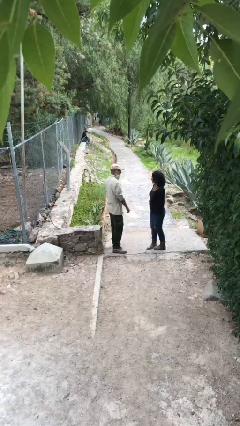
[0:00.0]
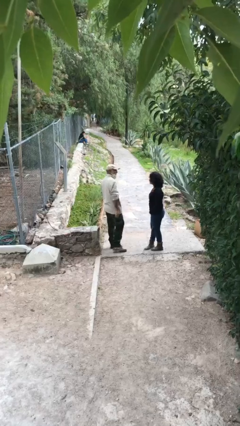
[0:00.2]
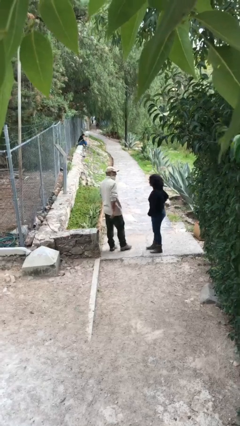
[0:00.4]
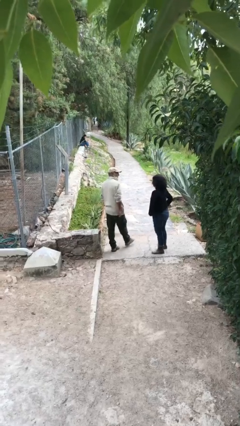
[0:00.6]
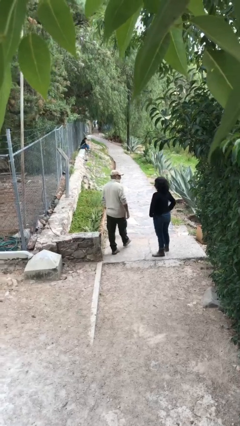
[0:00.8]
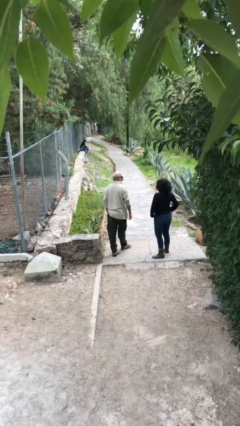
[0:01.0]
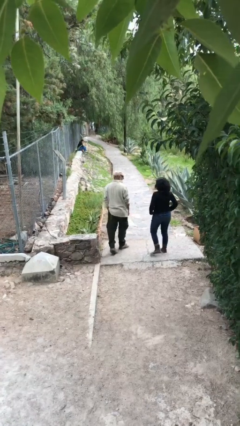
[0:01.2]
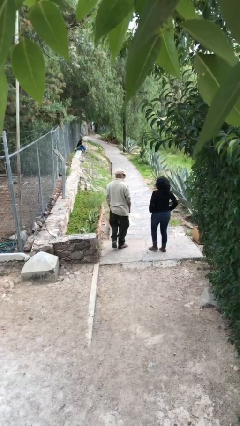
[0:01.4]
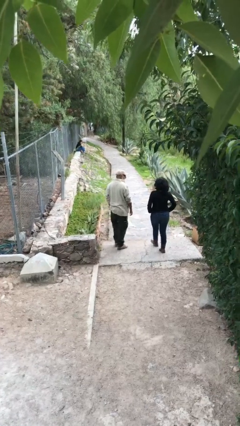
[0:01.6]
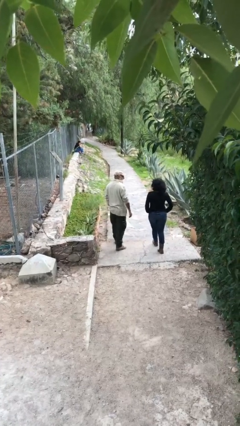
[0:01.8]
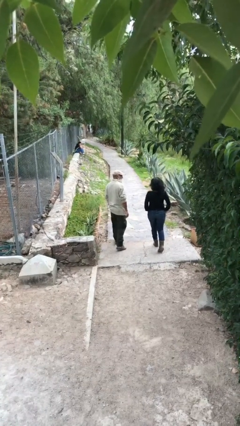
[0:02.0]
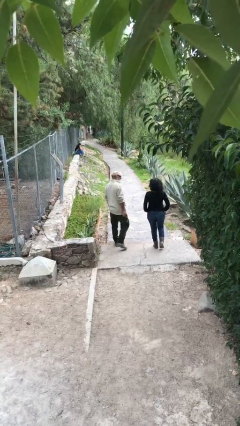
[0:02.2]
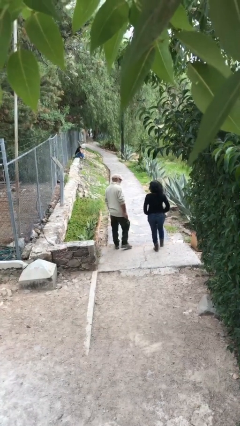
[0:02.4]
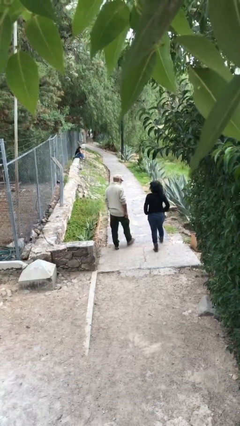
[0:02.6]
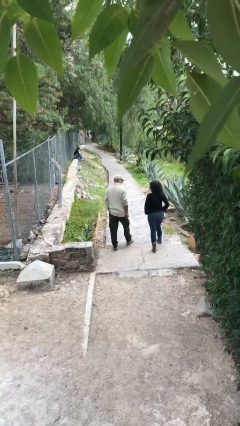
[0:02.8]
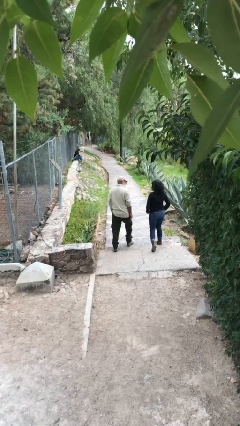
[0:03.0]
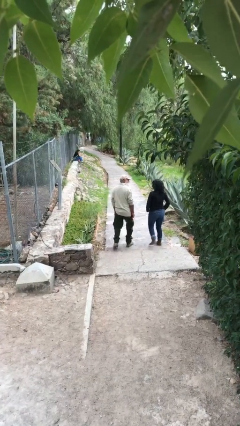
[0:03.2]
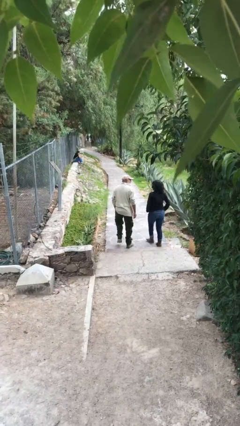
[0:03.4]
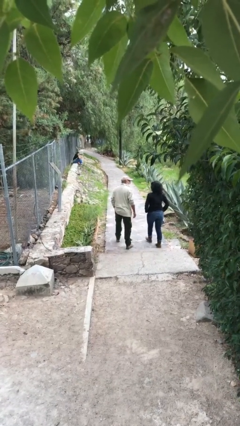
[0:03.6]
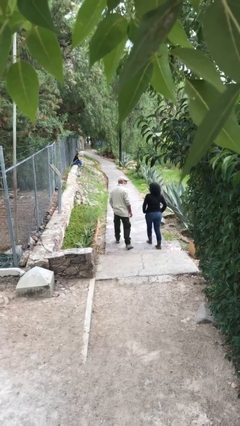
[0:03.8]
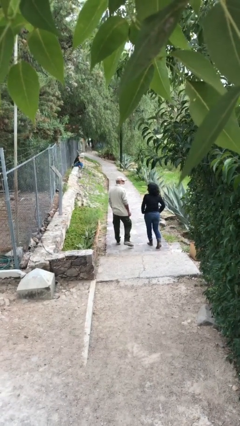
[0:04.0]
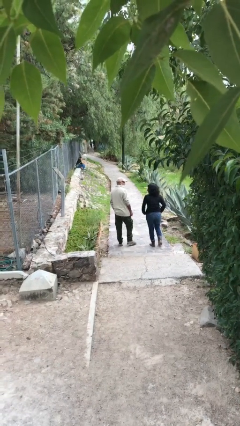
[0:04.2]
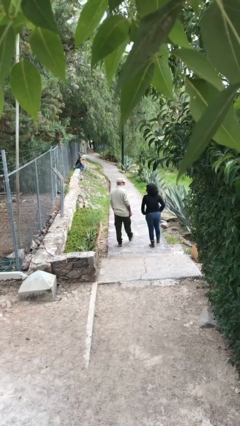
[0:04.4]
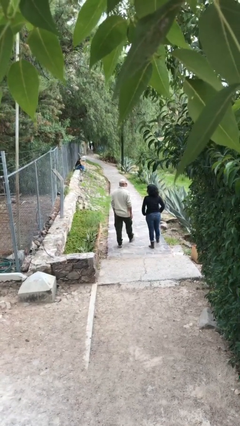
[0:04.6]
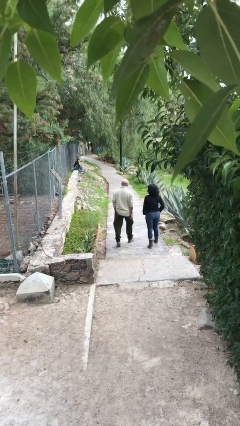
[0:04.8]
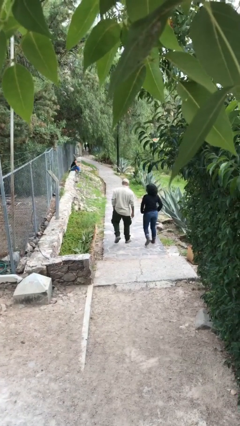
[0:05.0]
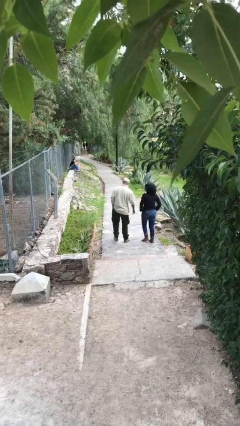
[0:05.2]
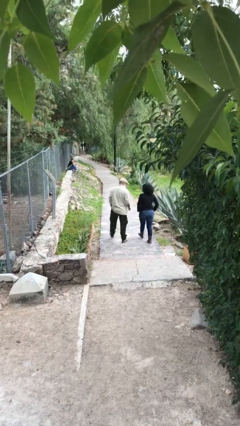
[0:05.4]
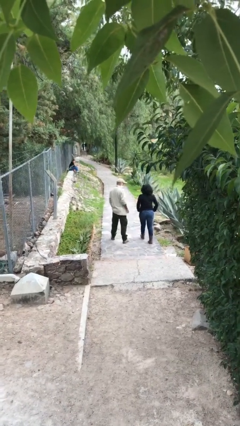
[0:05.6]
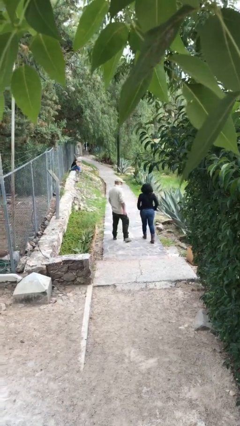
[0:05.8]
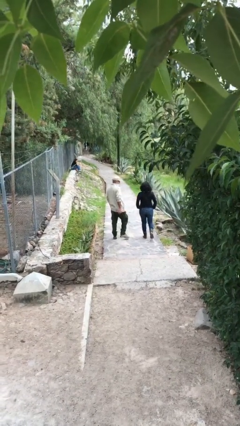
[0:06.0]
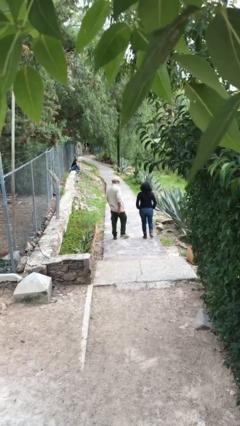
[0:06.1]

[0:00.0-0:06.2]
person talks to person

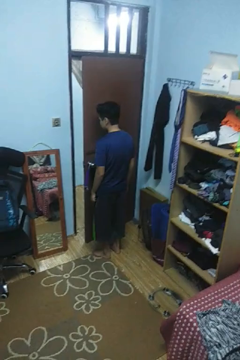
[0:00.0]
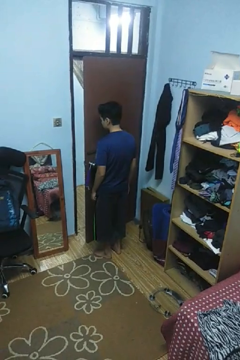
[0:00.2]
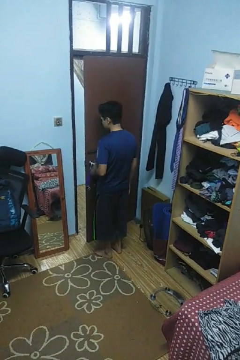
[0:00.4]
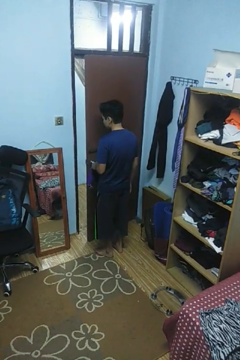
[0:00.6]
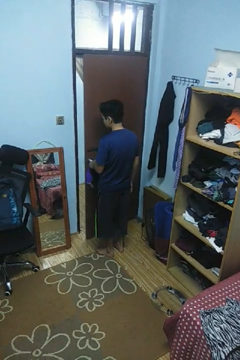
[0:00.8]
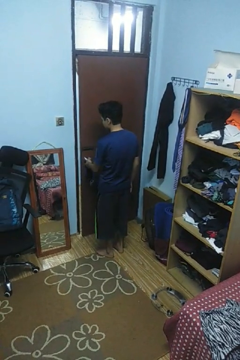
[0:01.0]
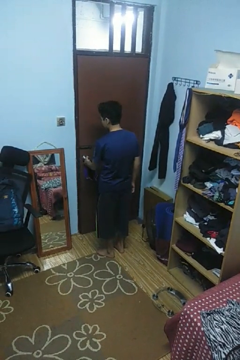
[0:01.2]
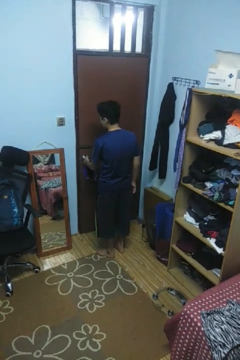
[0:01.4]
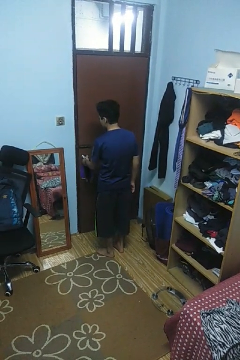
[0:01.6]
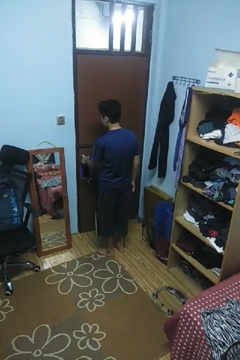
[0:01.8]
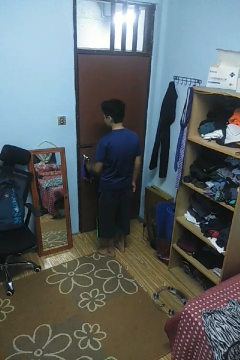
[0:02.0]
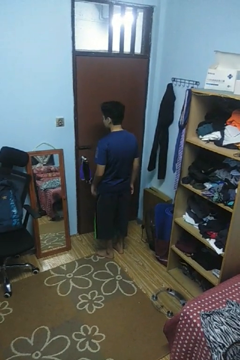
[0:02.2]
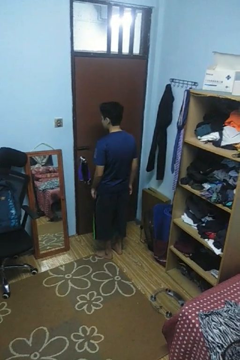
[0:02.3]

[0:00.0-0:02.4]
person closes facility door

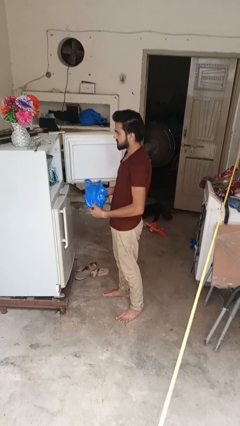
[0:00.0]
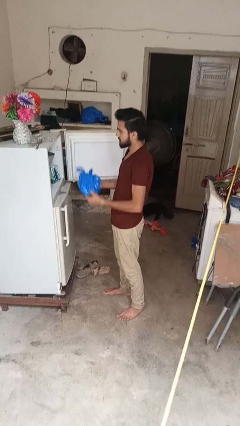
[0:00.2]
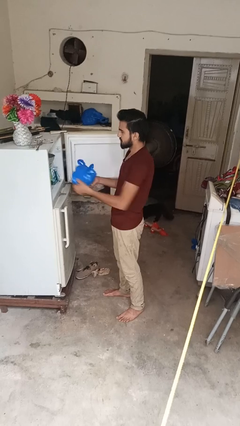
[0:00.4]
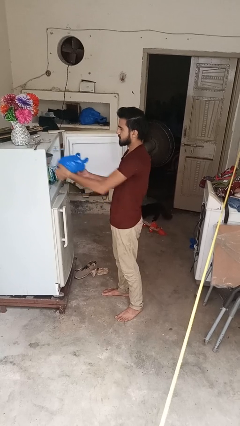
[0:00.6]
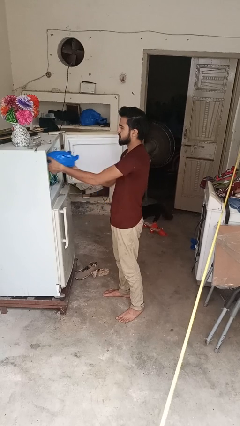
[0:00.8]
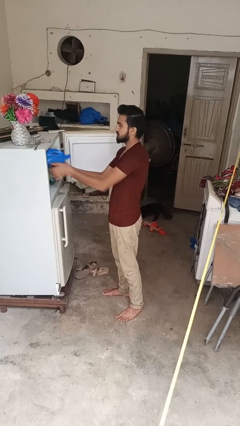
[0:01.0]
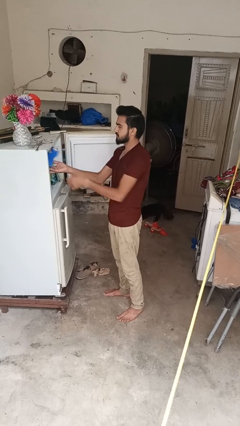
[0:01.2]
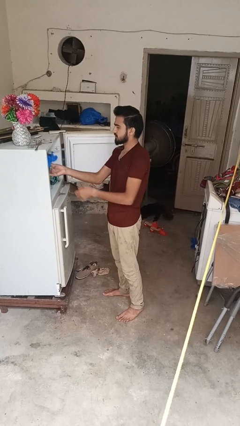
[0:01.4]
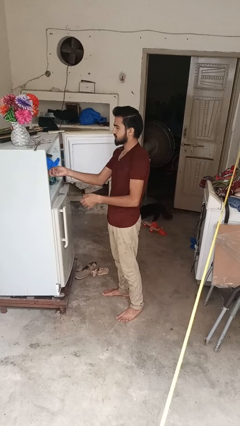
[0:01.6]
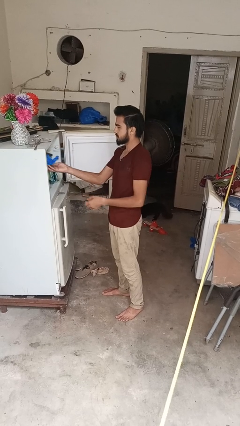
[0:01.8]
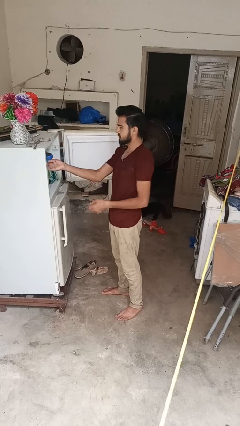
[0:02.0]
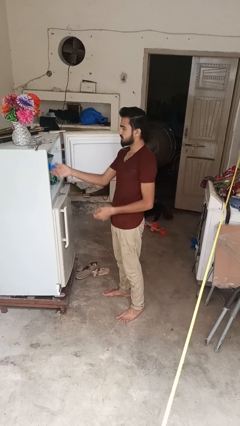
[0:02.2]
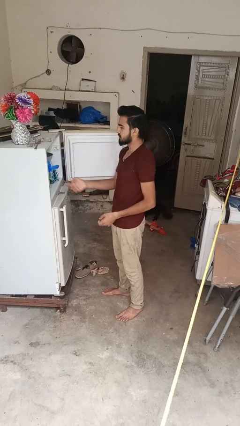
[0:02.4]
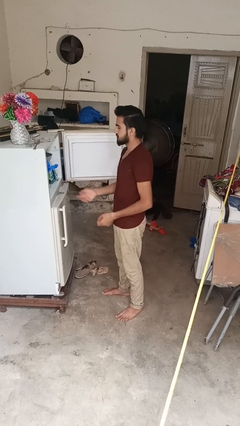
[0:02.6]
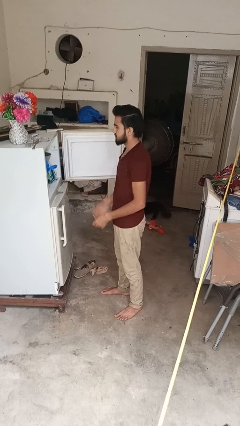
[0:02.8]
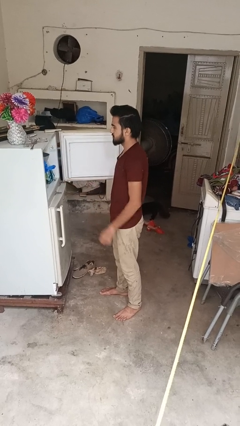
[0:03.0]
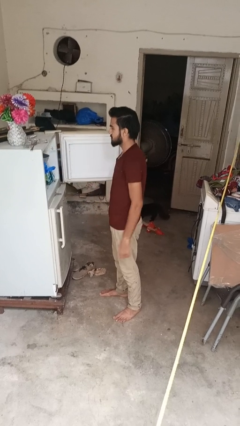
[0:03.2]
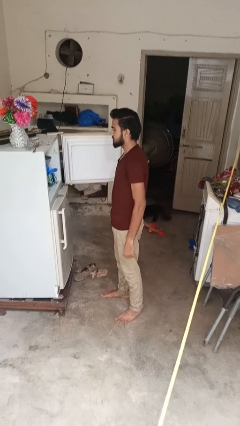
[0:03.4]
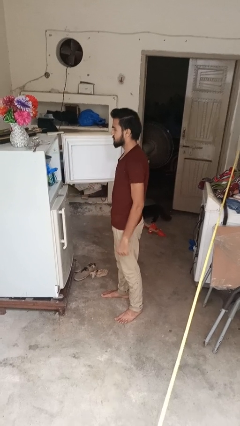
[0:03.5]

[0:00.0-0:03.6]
person loads groceries into refrigerator

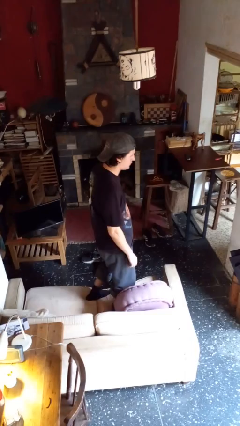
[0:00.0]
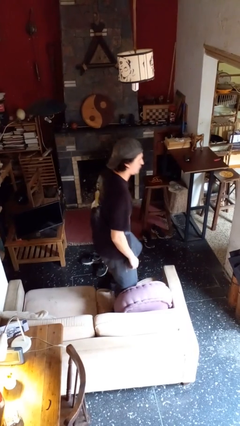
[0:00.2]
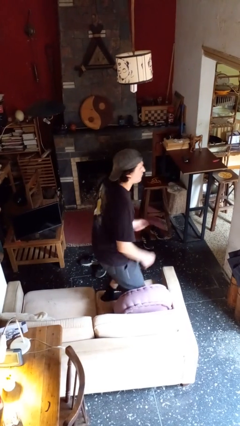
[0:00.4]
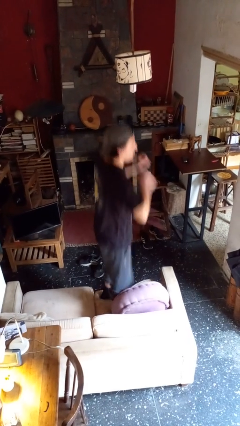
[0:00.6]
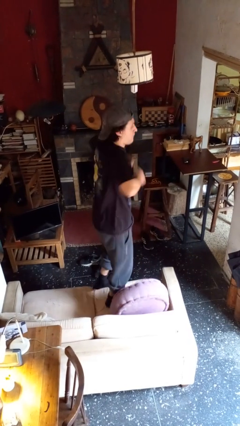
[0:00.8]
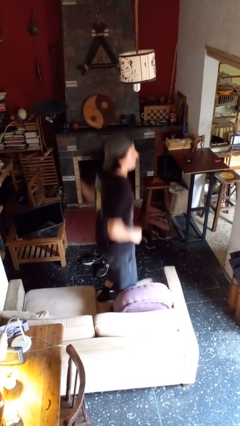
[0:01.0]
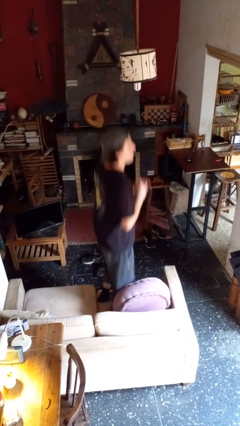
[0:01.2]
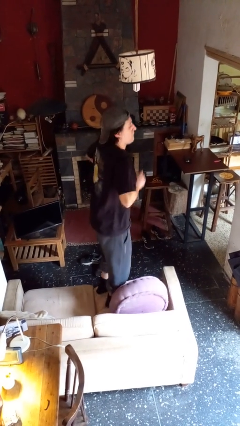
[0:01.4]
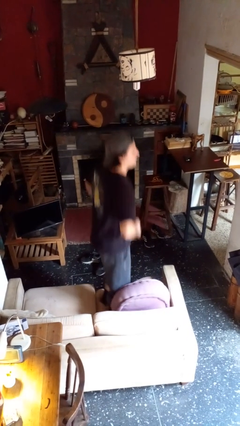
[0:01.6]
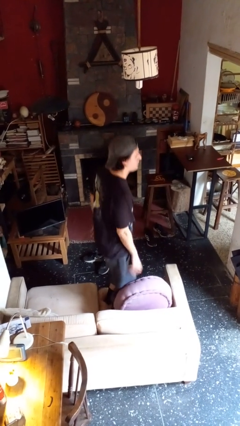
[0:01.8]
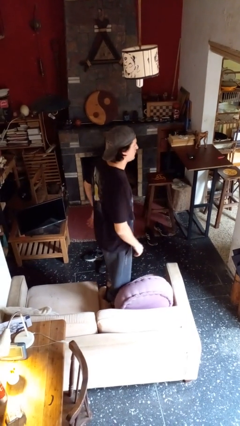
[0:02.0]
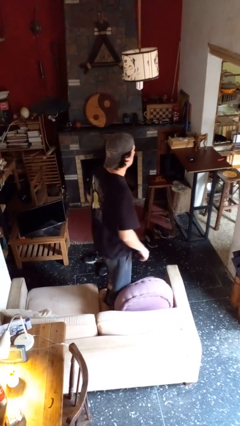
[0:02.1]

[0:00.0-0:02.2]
person jumps on couch

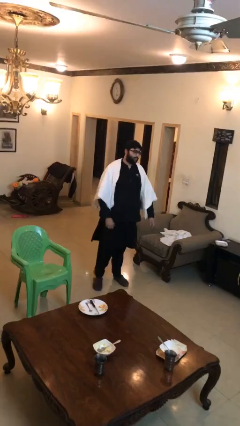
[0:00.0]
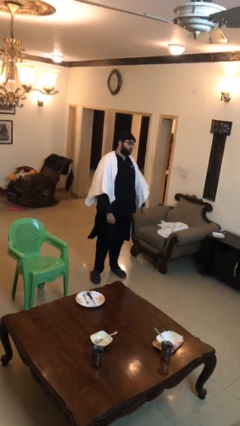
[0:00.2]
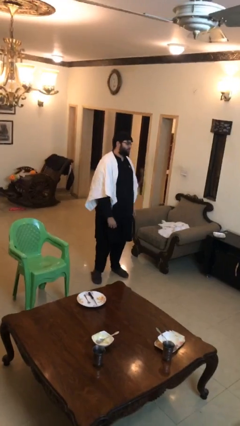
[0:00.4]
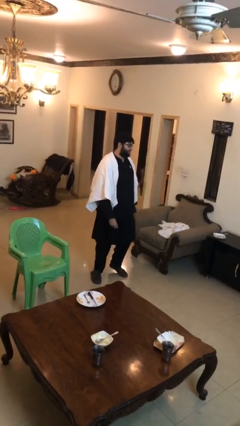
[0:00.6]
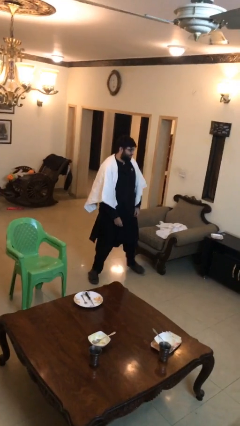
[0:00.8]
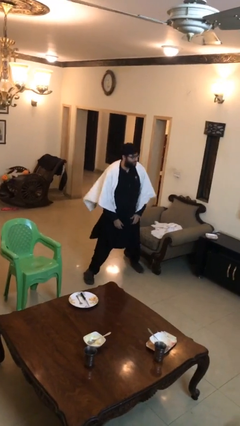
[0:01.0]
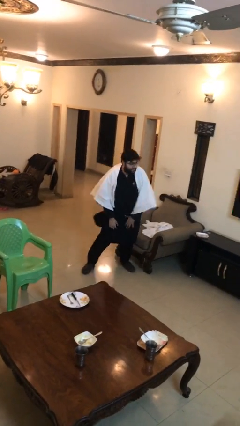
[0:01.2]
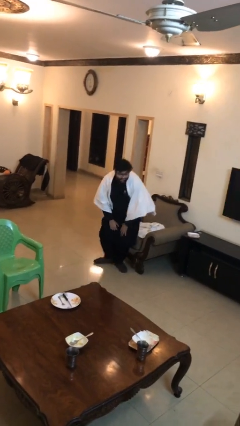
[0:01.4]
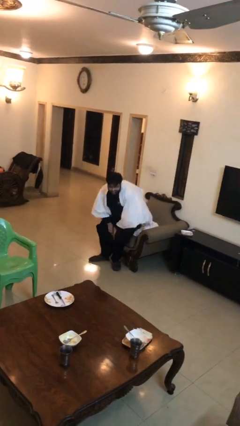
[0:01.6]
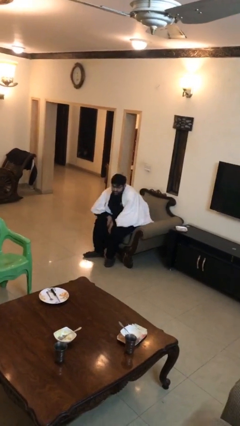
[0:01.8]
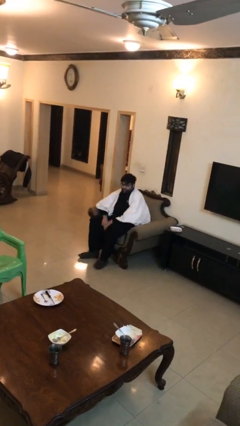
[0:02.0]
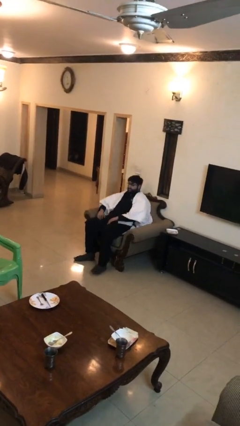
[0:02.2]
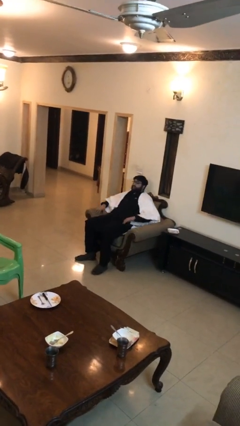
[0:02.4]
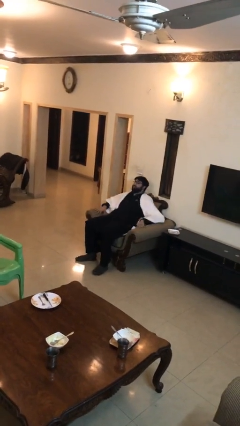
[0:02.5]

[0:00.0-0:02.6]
person sits down

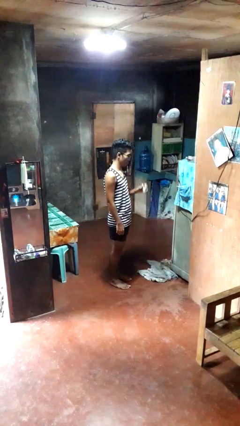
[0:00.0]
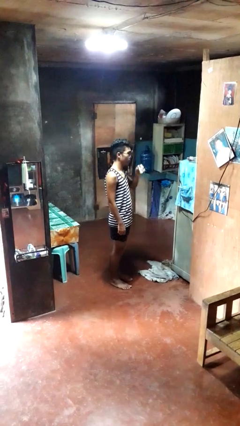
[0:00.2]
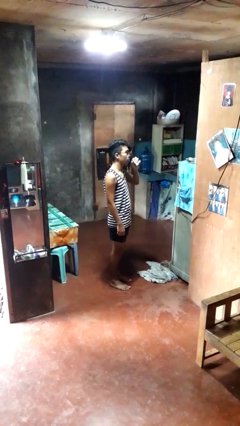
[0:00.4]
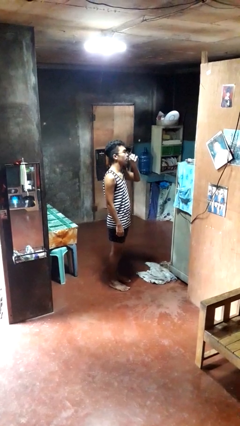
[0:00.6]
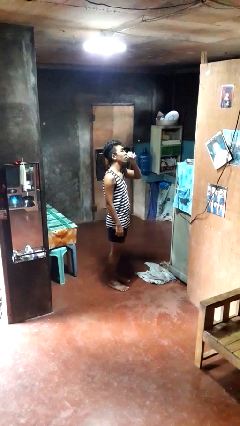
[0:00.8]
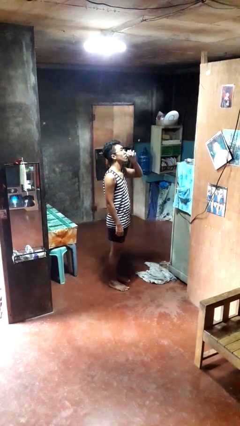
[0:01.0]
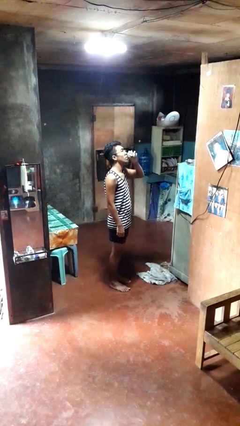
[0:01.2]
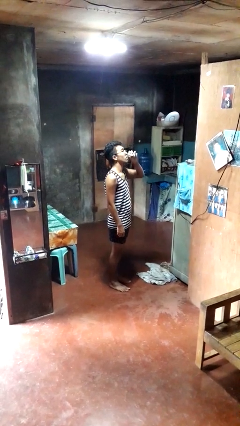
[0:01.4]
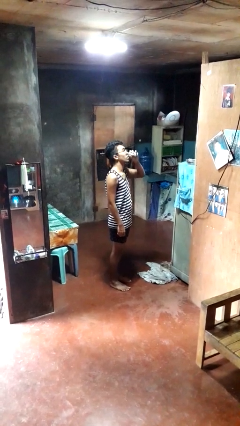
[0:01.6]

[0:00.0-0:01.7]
person drinks from beverage can
